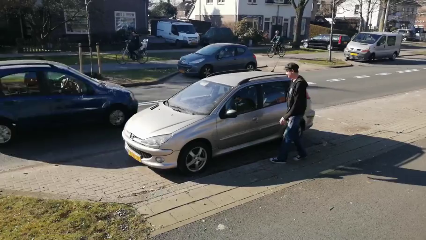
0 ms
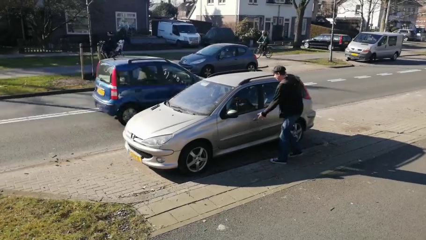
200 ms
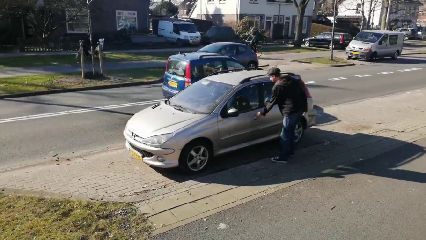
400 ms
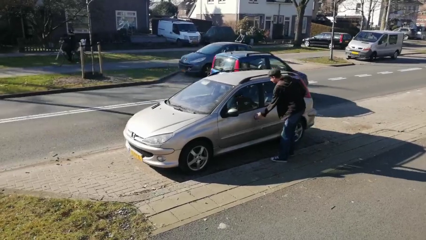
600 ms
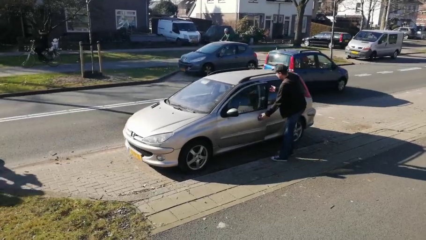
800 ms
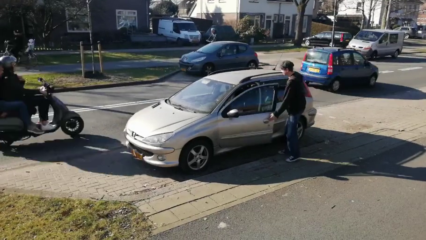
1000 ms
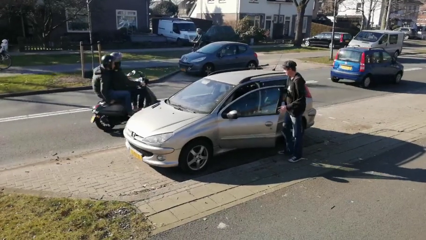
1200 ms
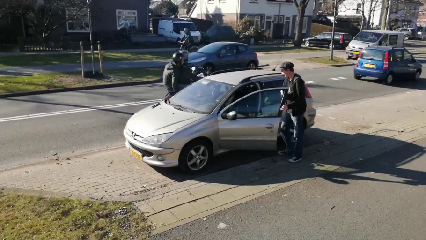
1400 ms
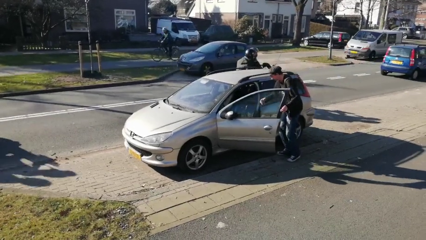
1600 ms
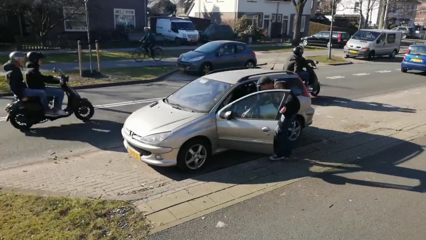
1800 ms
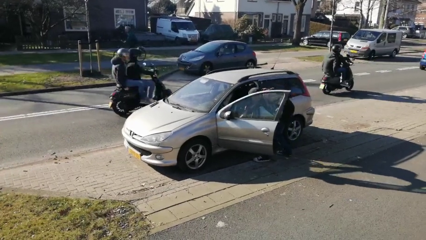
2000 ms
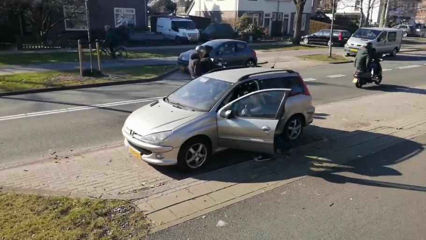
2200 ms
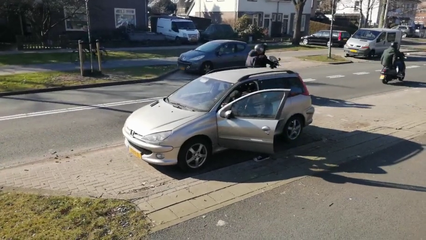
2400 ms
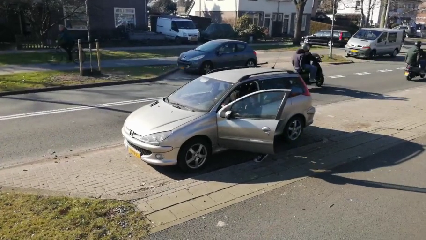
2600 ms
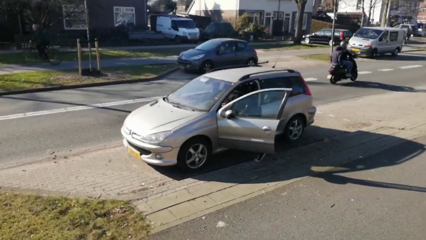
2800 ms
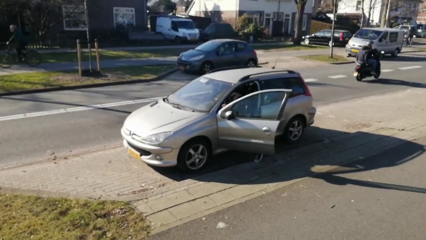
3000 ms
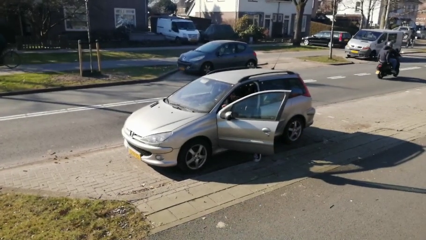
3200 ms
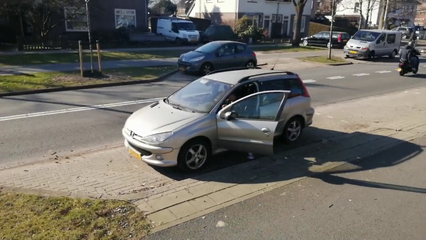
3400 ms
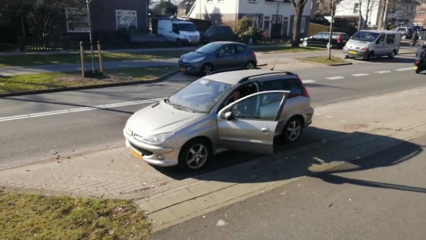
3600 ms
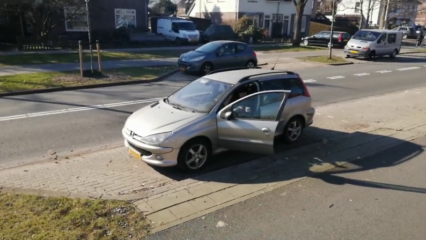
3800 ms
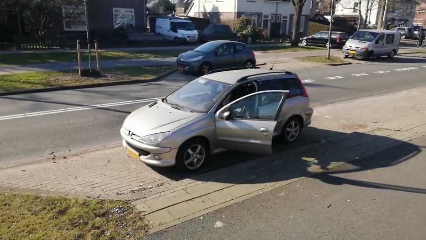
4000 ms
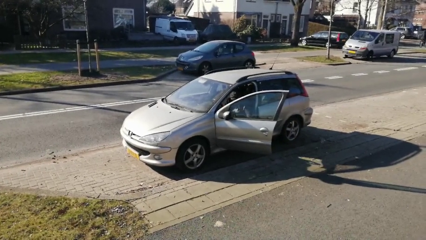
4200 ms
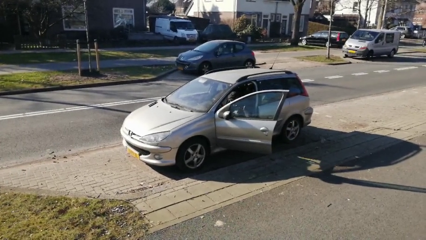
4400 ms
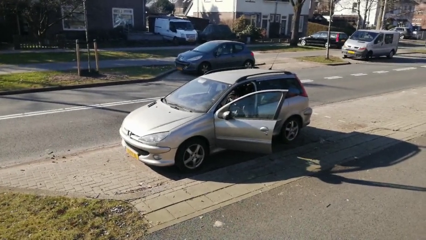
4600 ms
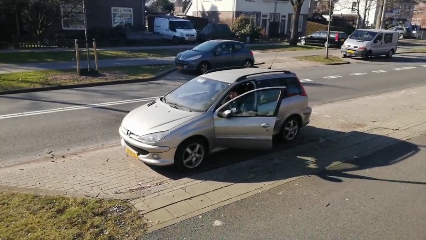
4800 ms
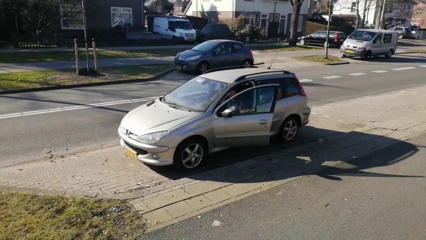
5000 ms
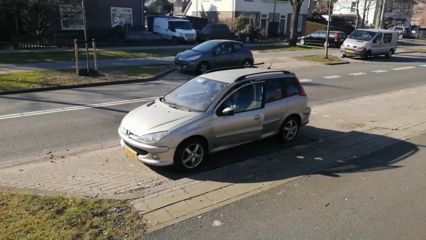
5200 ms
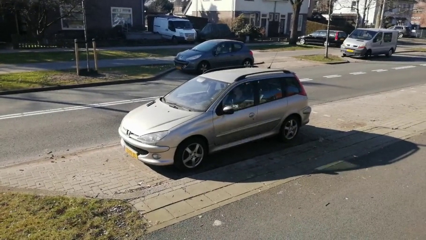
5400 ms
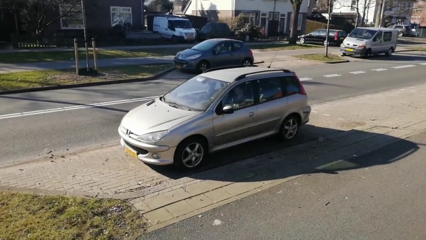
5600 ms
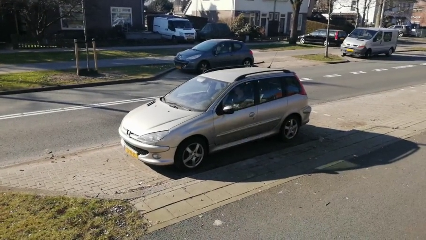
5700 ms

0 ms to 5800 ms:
car picks up person

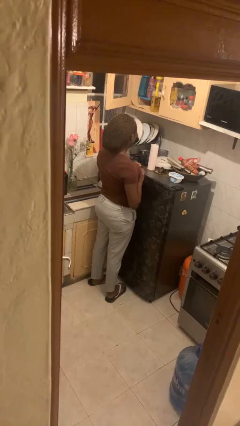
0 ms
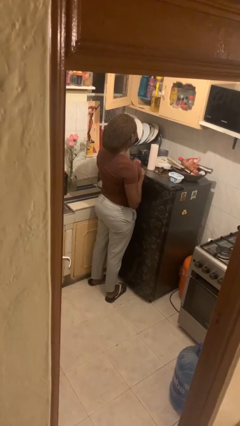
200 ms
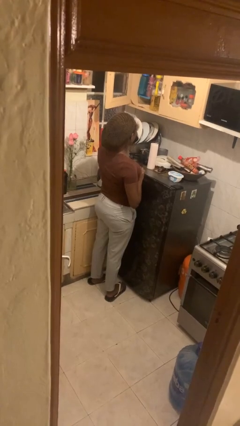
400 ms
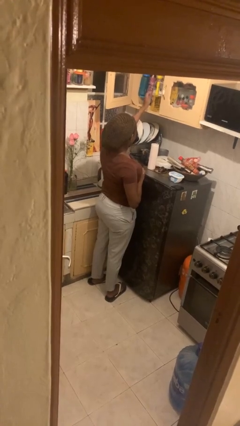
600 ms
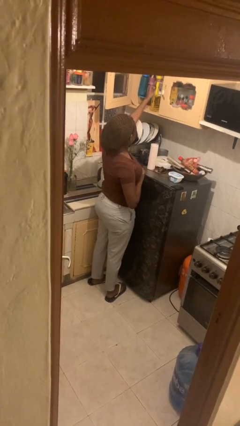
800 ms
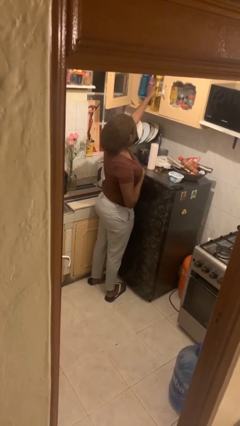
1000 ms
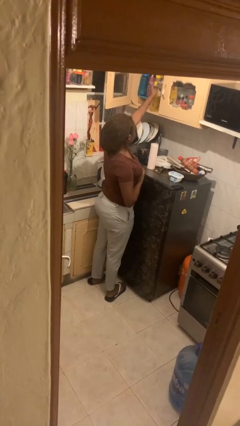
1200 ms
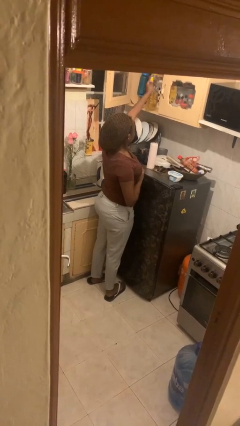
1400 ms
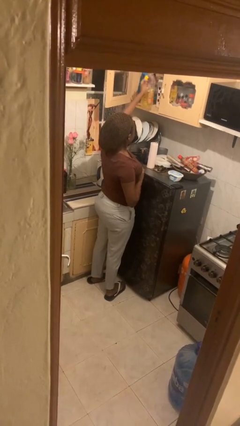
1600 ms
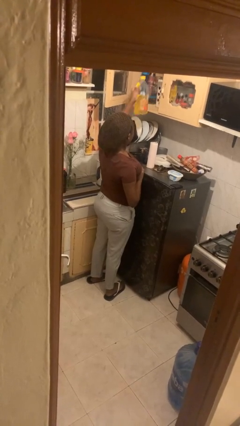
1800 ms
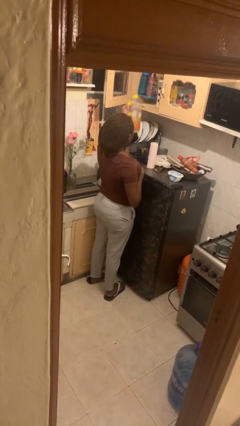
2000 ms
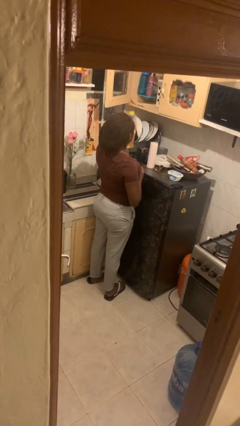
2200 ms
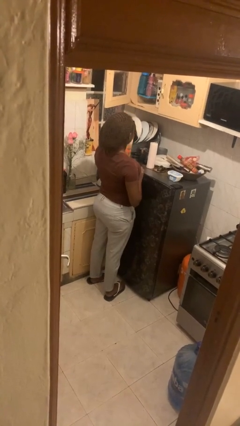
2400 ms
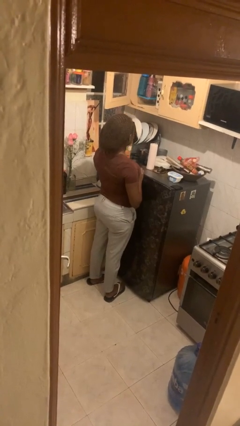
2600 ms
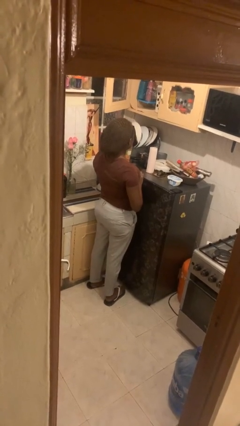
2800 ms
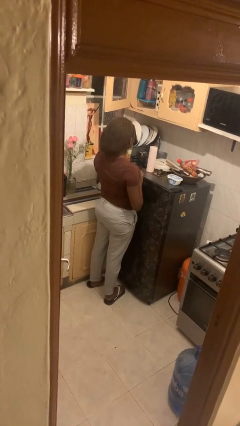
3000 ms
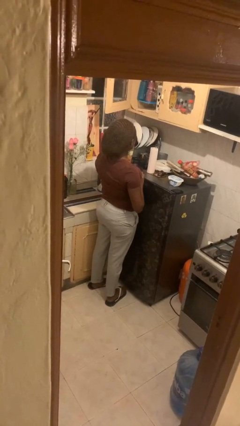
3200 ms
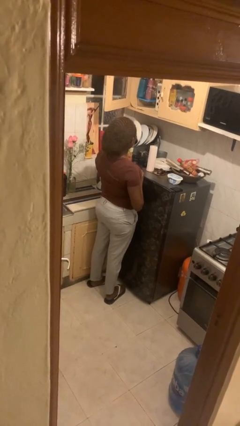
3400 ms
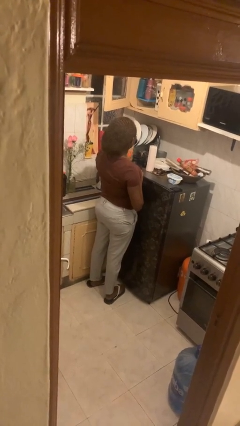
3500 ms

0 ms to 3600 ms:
person picks up object from cabinet

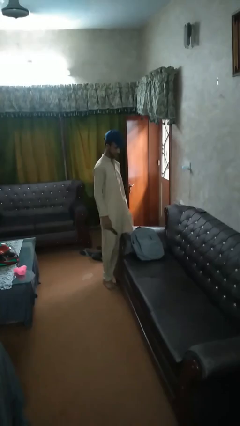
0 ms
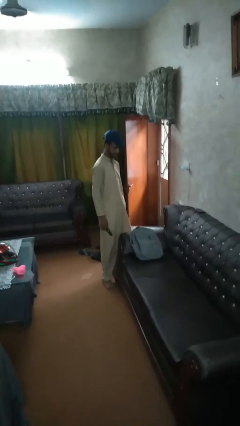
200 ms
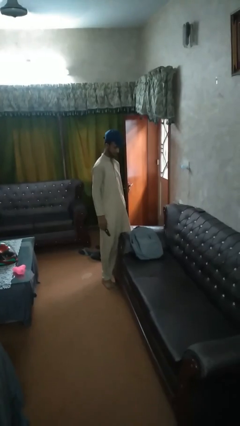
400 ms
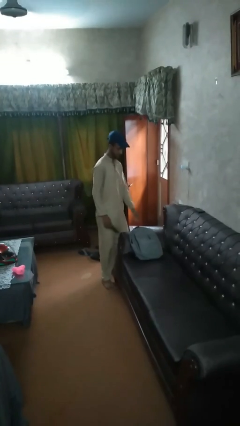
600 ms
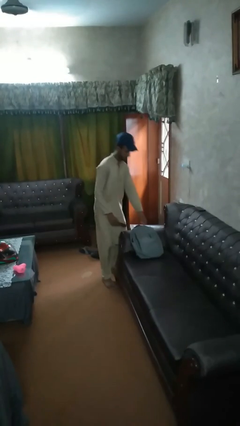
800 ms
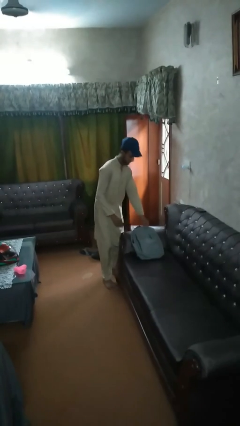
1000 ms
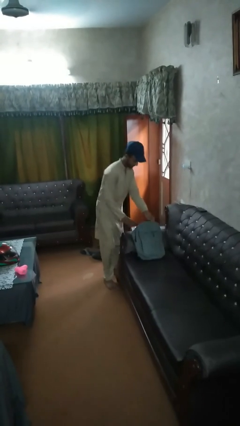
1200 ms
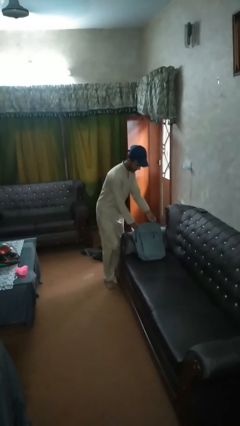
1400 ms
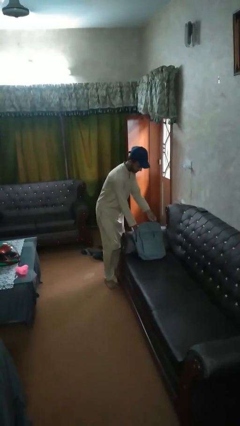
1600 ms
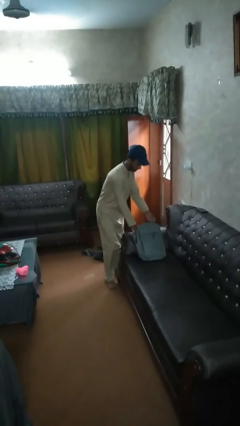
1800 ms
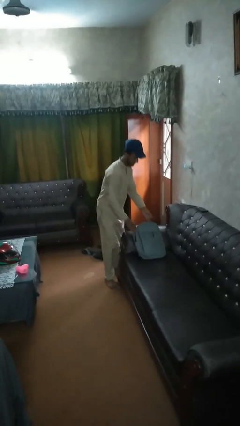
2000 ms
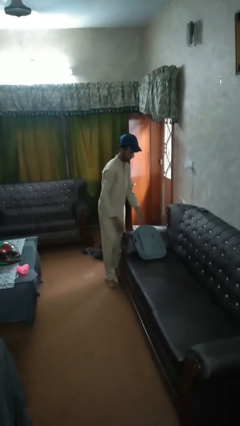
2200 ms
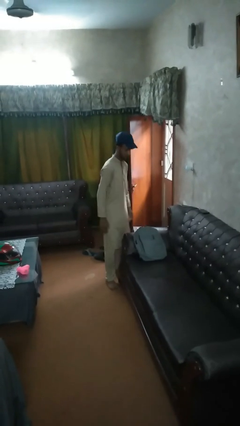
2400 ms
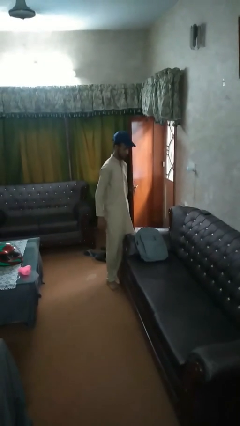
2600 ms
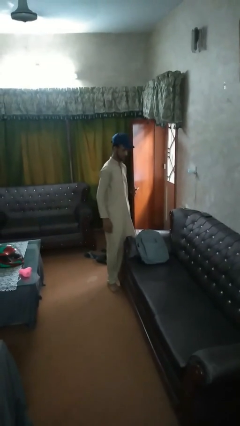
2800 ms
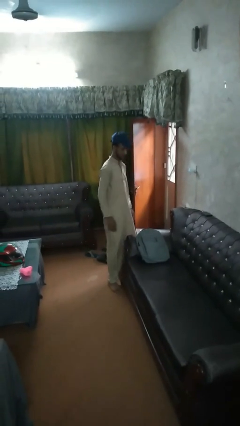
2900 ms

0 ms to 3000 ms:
person puts object into bag

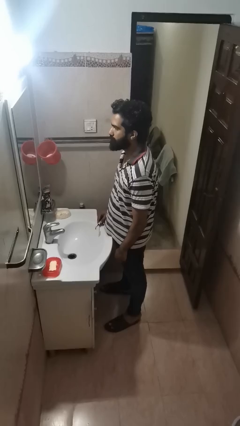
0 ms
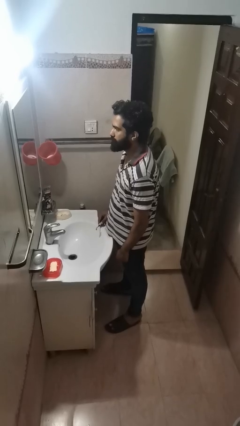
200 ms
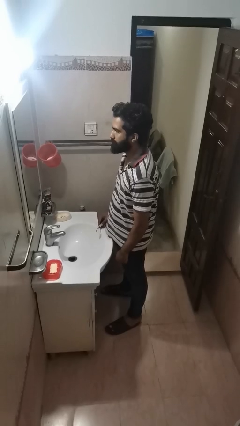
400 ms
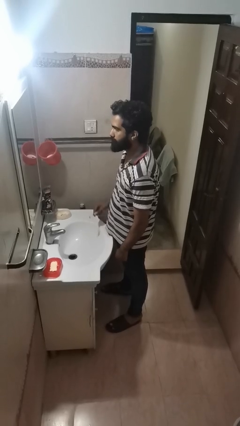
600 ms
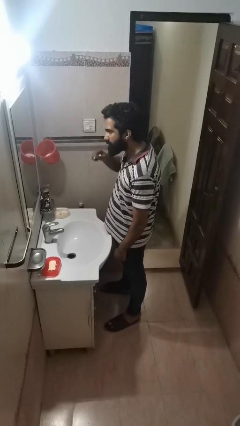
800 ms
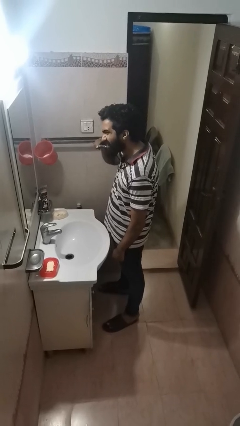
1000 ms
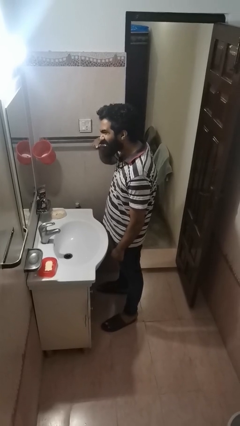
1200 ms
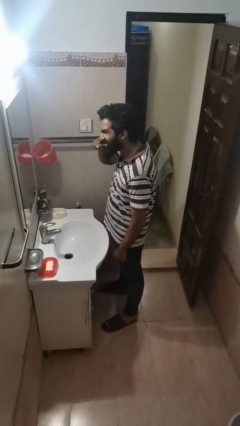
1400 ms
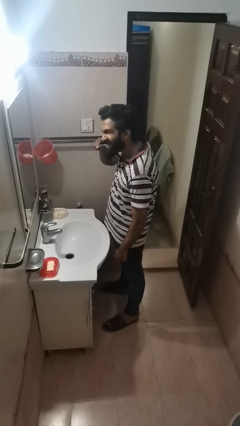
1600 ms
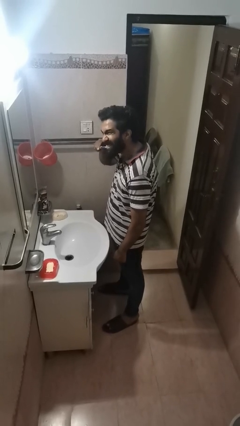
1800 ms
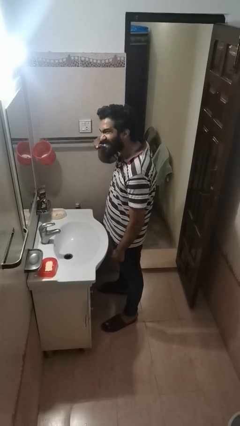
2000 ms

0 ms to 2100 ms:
person brushes teeth

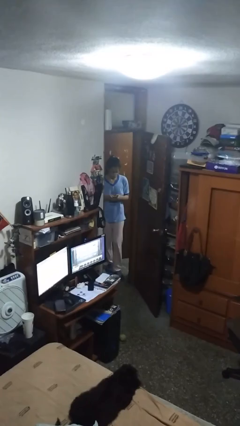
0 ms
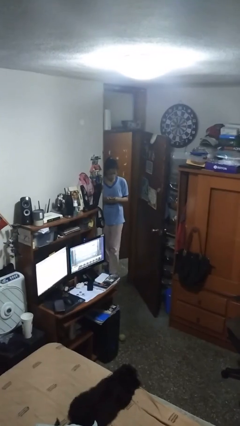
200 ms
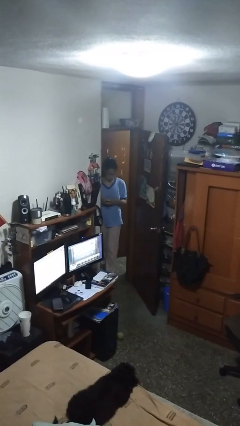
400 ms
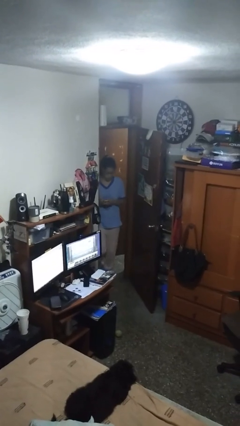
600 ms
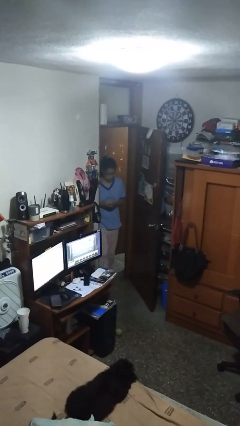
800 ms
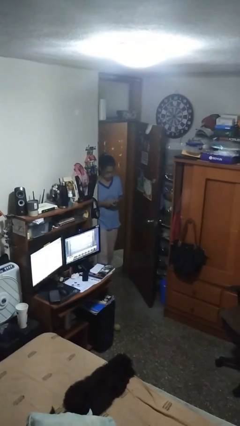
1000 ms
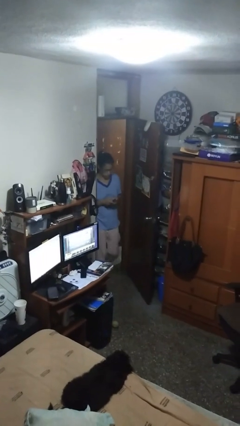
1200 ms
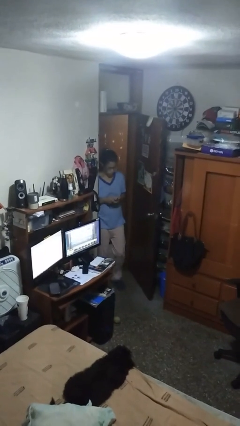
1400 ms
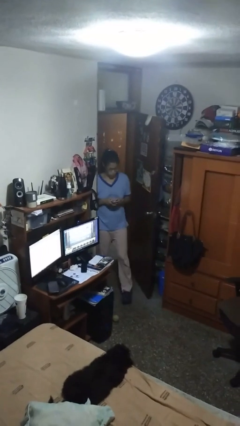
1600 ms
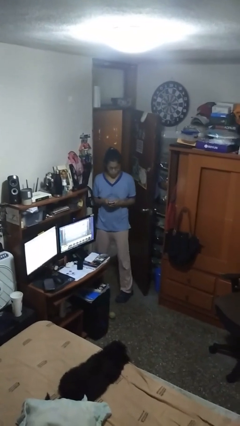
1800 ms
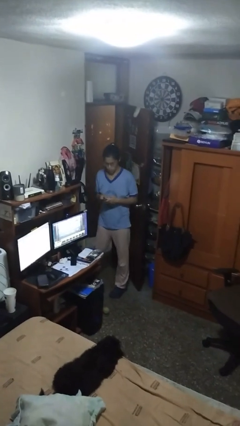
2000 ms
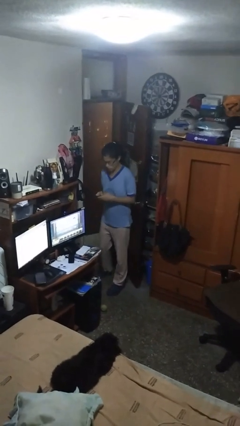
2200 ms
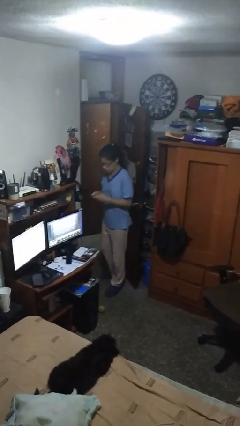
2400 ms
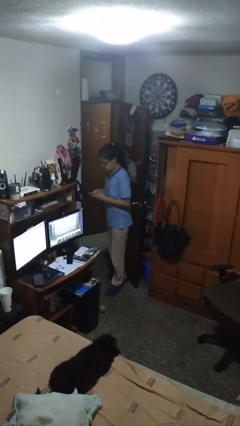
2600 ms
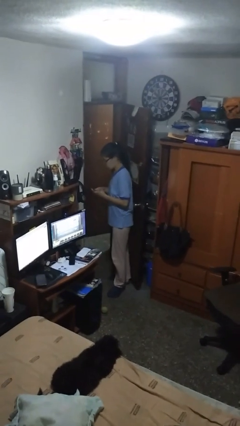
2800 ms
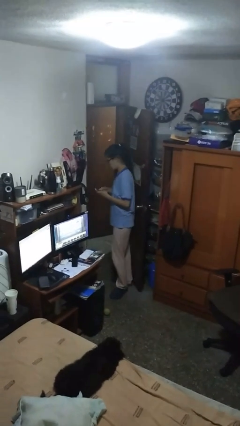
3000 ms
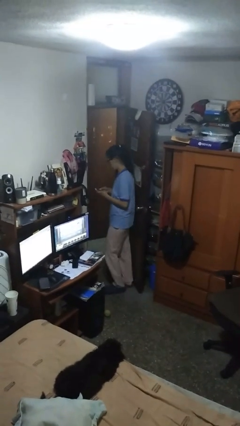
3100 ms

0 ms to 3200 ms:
person enters scene through structure
